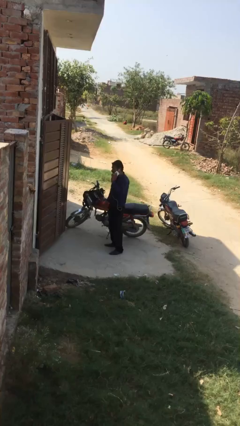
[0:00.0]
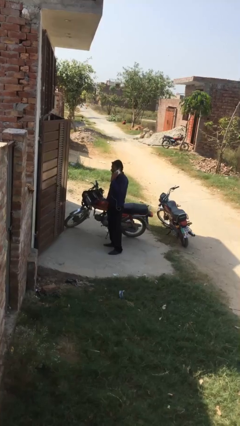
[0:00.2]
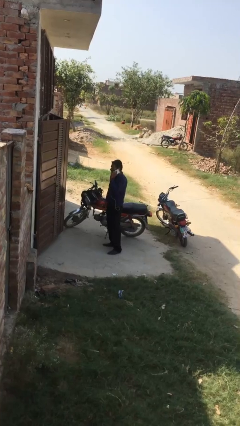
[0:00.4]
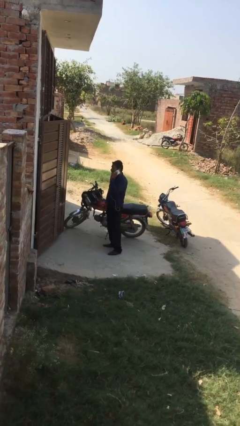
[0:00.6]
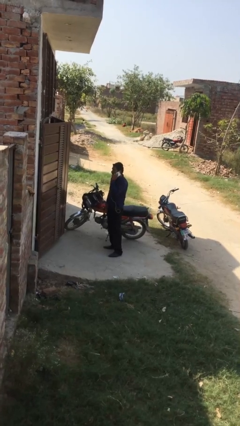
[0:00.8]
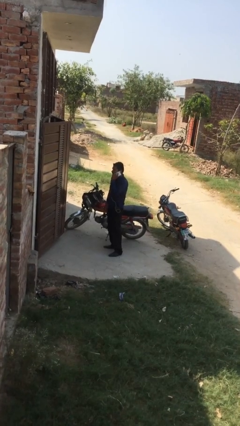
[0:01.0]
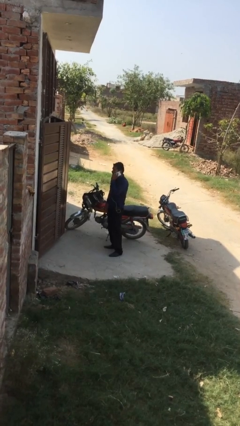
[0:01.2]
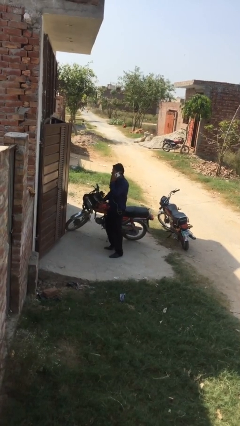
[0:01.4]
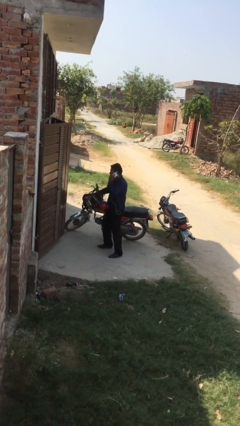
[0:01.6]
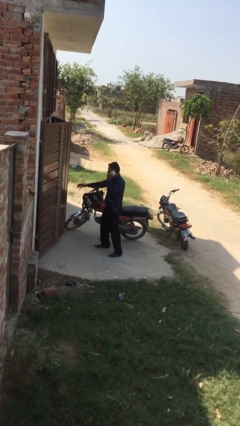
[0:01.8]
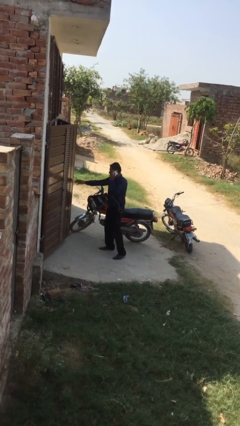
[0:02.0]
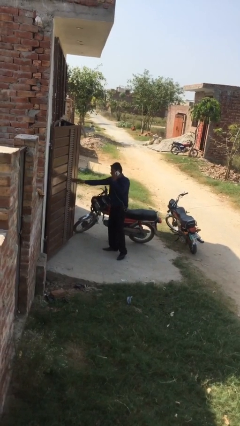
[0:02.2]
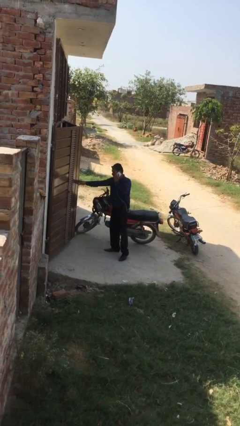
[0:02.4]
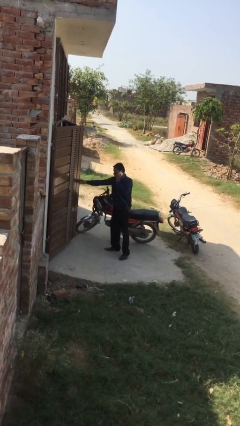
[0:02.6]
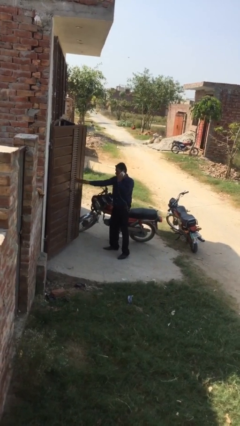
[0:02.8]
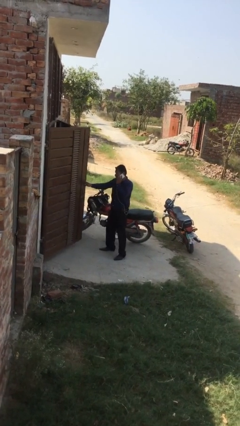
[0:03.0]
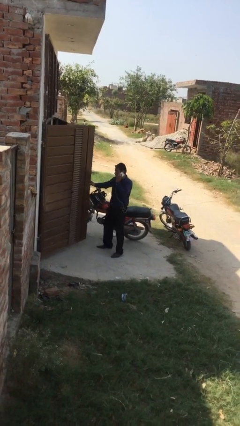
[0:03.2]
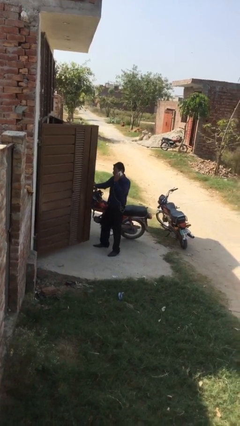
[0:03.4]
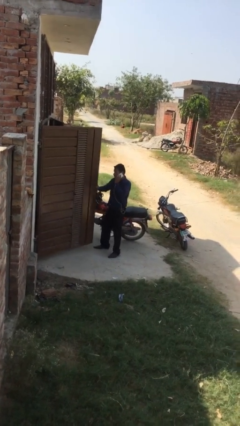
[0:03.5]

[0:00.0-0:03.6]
person opens facility door

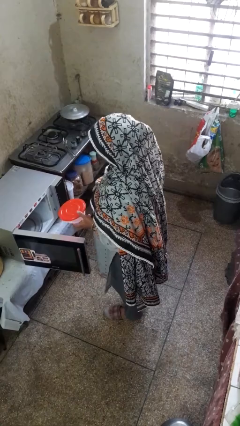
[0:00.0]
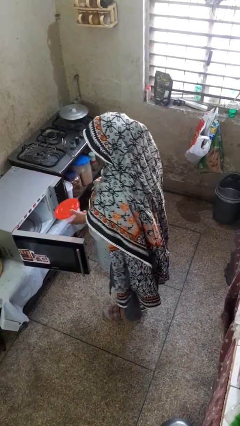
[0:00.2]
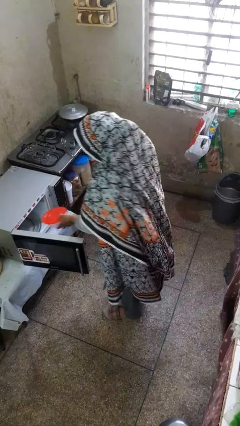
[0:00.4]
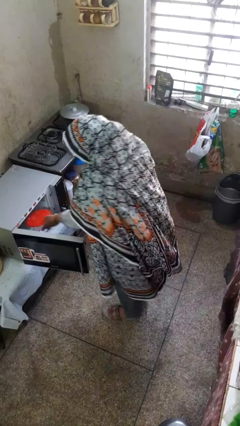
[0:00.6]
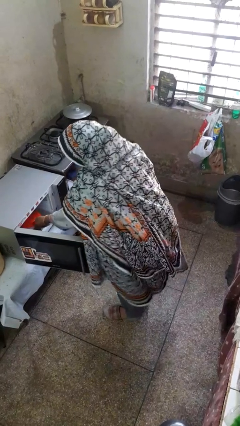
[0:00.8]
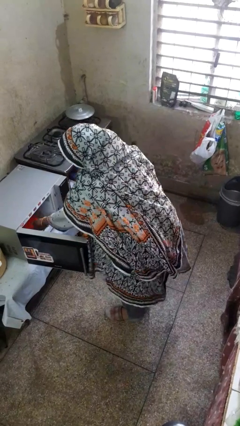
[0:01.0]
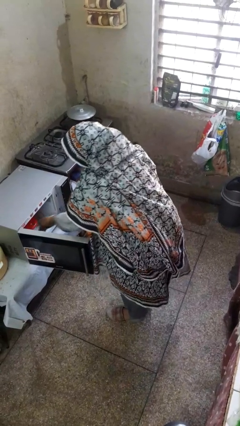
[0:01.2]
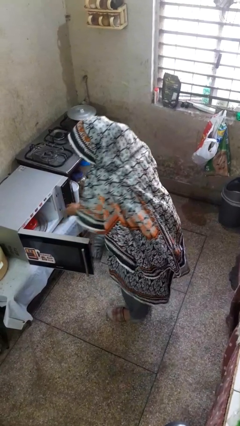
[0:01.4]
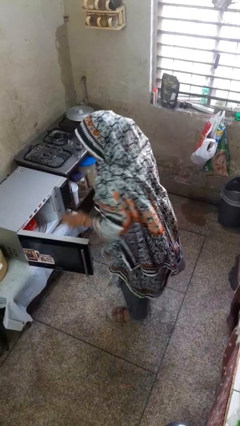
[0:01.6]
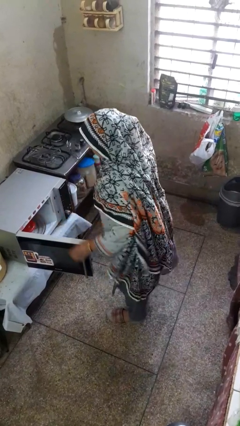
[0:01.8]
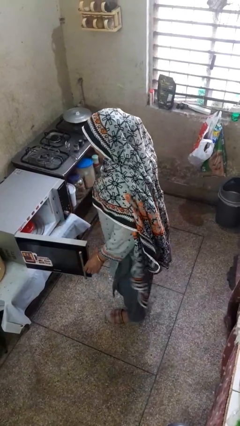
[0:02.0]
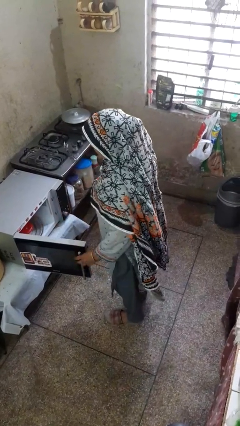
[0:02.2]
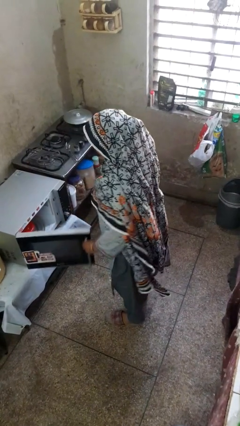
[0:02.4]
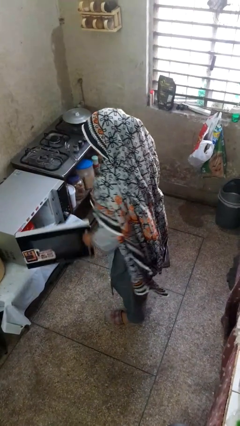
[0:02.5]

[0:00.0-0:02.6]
person puts object into microwave

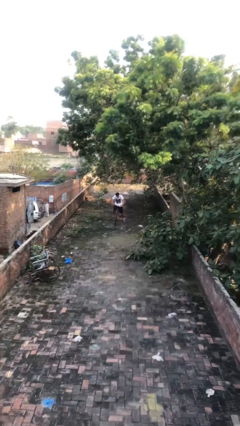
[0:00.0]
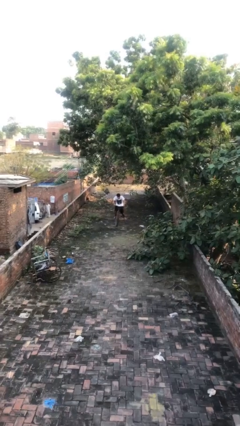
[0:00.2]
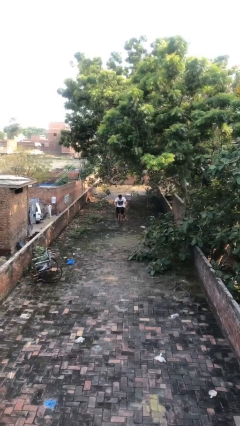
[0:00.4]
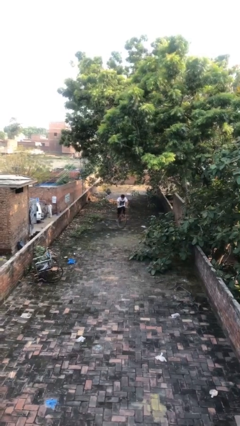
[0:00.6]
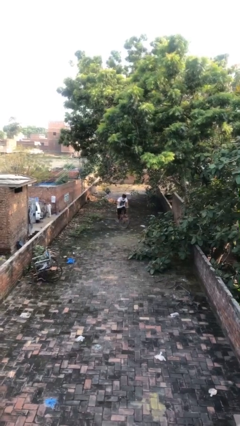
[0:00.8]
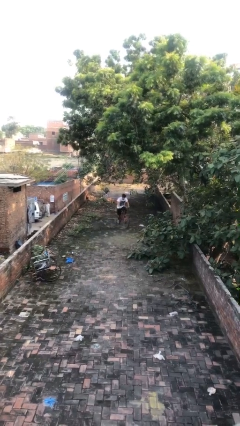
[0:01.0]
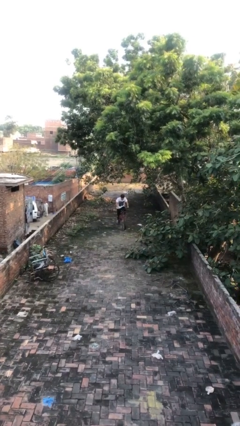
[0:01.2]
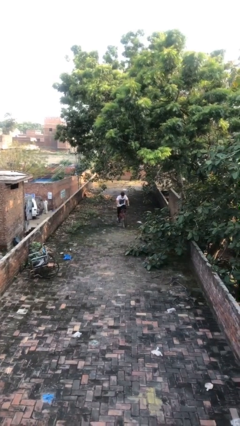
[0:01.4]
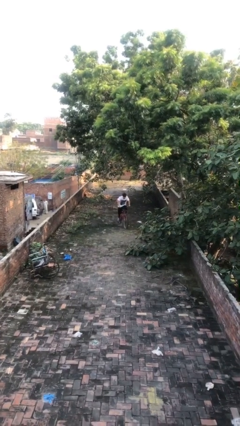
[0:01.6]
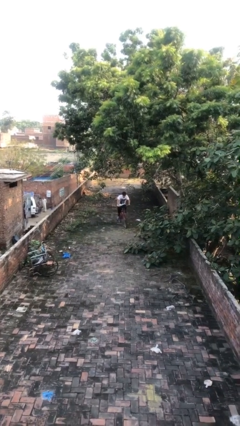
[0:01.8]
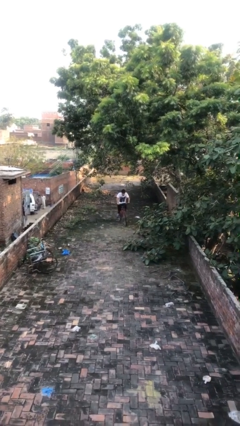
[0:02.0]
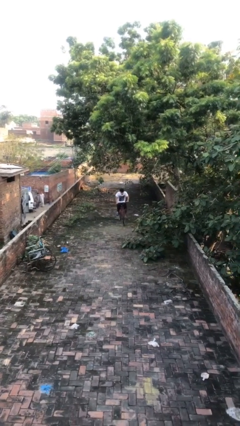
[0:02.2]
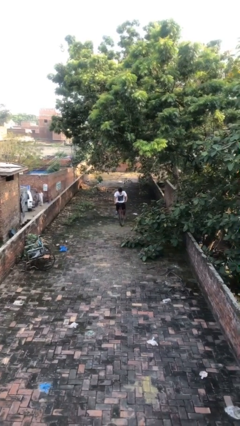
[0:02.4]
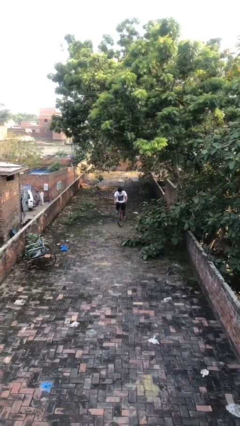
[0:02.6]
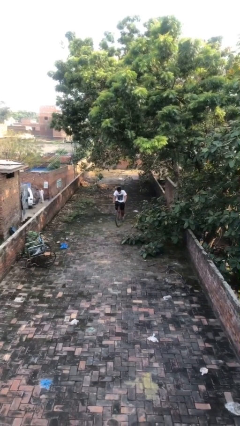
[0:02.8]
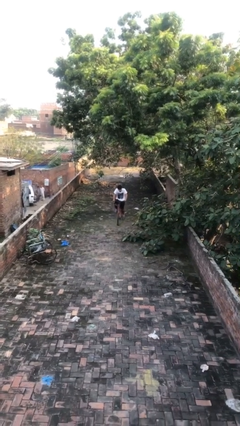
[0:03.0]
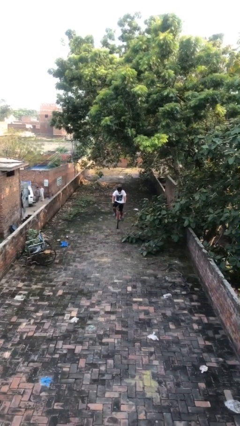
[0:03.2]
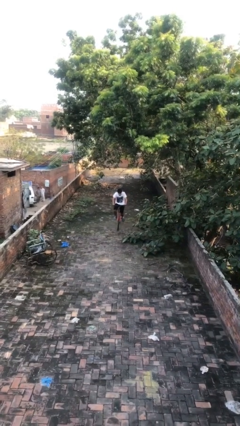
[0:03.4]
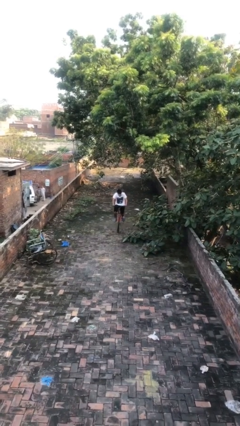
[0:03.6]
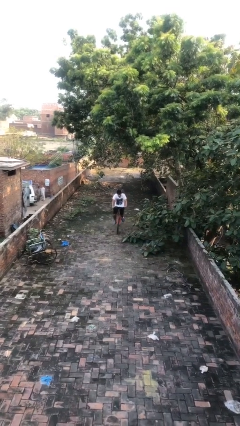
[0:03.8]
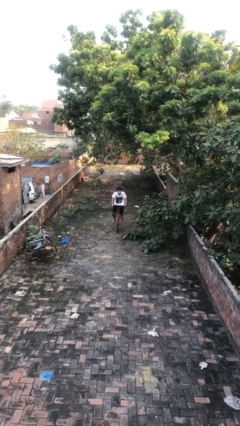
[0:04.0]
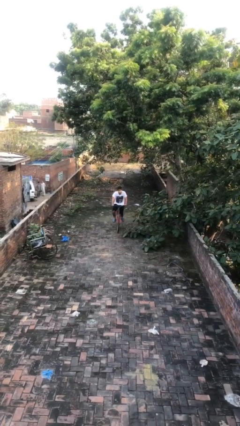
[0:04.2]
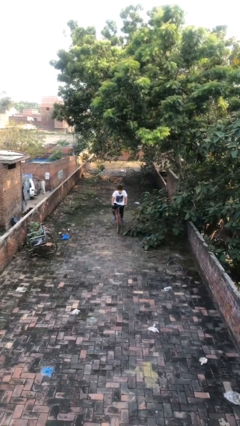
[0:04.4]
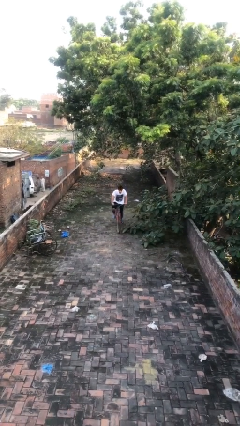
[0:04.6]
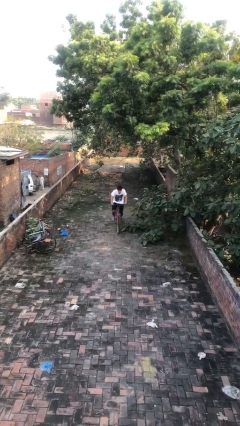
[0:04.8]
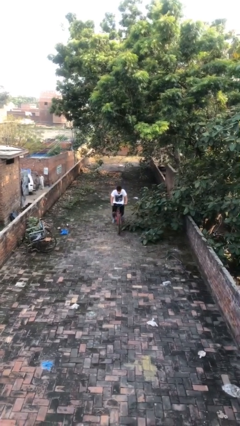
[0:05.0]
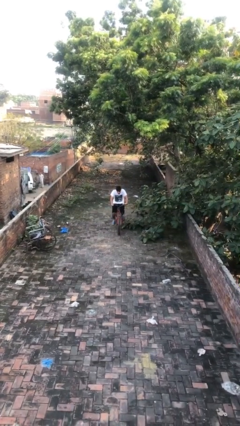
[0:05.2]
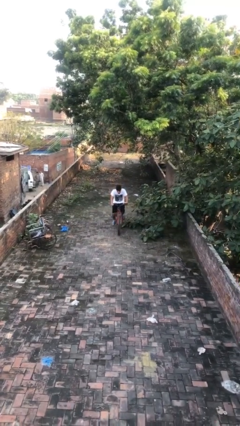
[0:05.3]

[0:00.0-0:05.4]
person rides bicycle

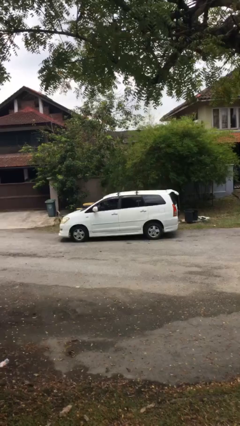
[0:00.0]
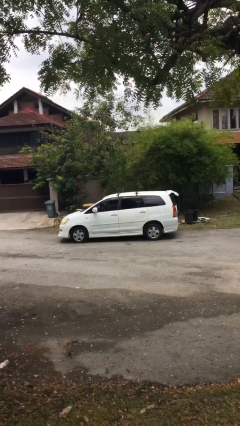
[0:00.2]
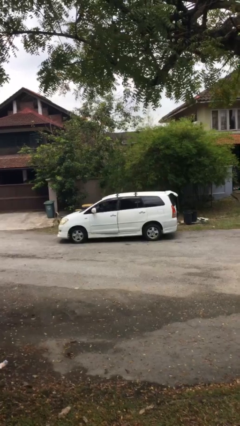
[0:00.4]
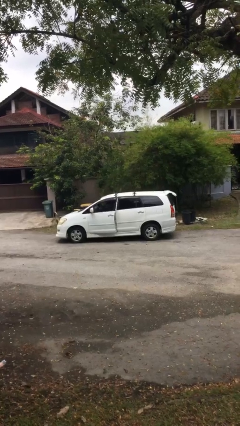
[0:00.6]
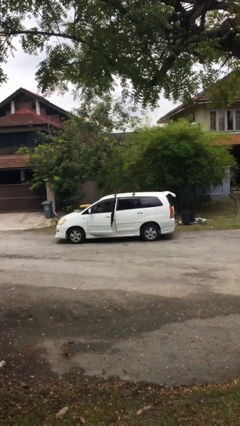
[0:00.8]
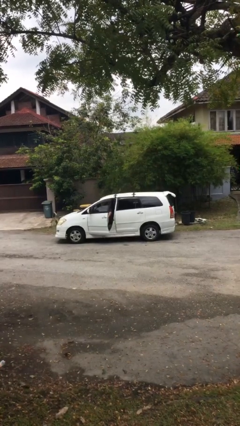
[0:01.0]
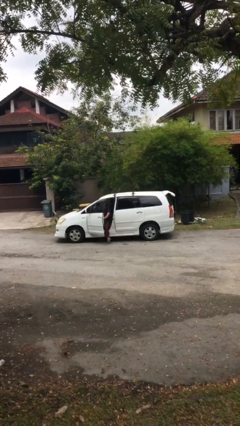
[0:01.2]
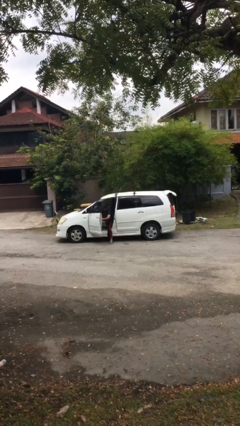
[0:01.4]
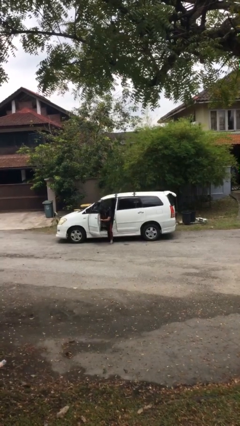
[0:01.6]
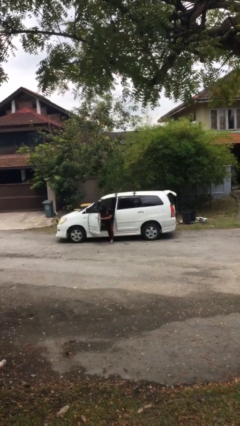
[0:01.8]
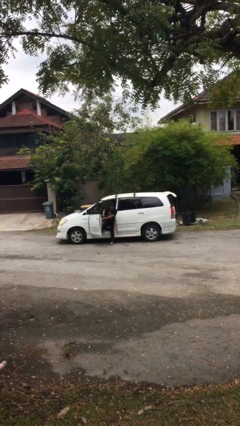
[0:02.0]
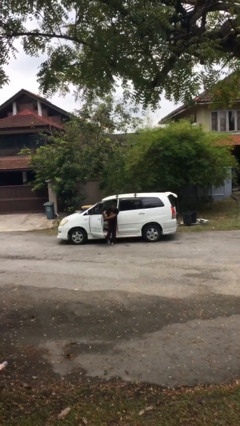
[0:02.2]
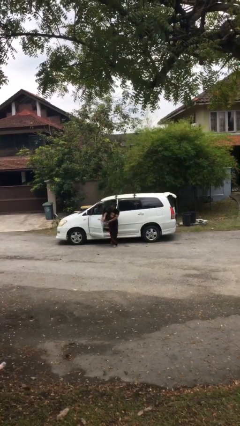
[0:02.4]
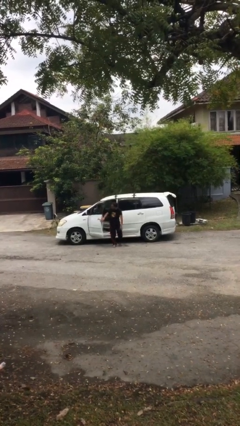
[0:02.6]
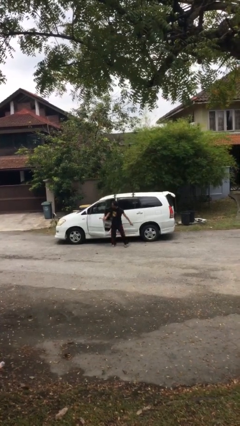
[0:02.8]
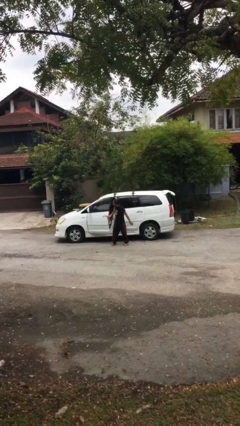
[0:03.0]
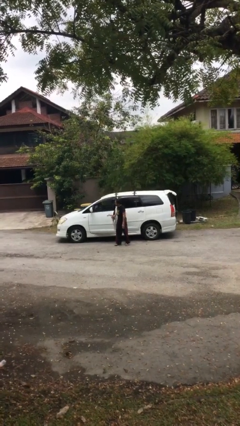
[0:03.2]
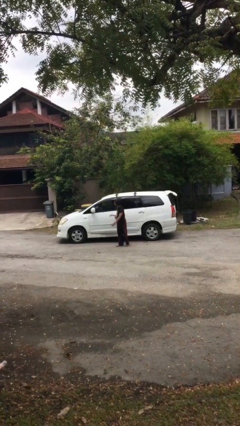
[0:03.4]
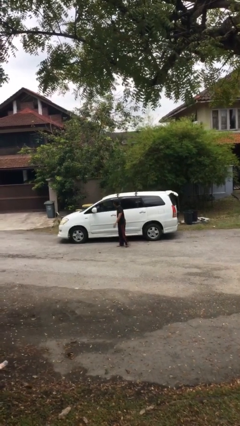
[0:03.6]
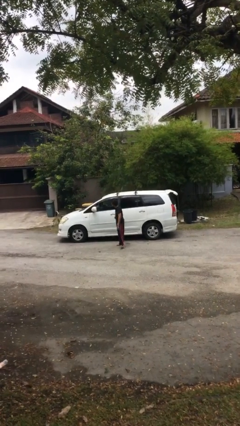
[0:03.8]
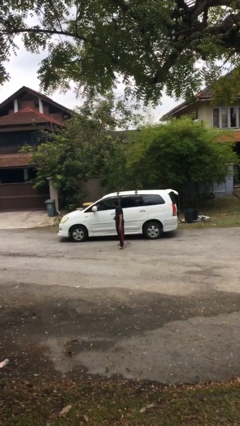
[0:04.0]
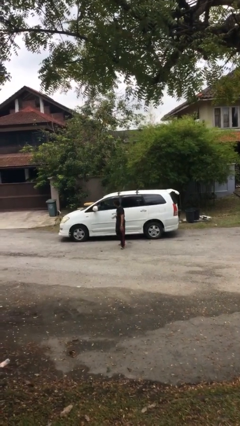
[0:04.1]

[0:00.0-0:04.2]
car drops off person

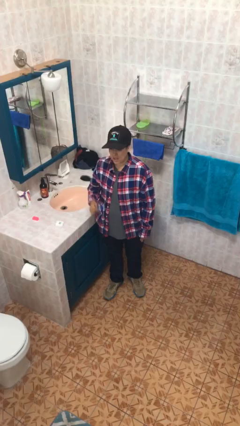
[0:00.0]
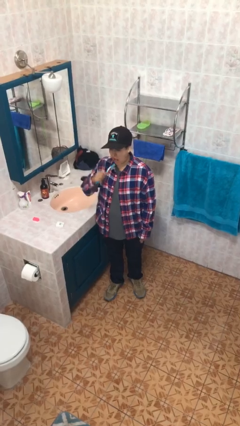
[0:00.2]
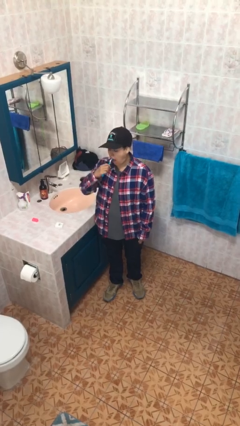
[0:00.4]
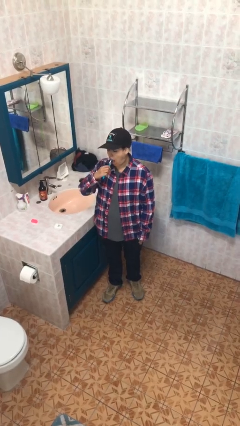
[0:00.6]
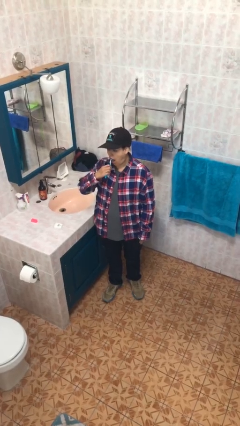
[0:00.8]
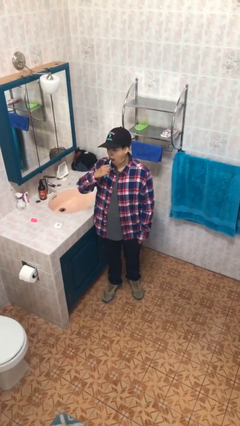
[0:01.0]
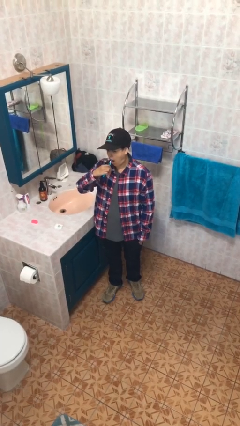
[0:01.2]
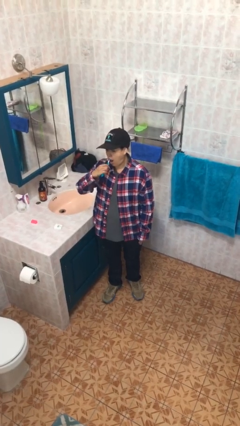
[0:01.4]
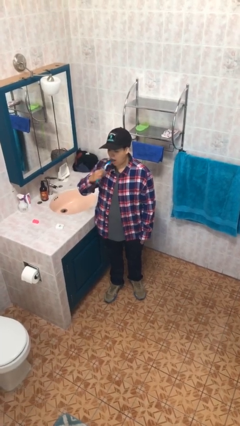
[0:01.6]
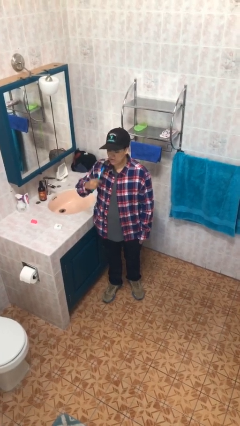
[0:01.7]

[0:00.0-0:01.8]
person brushes teeth
